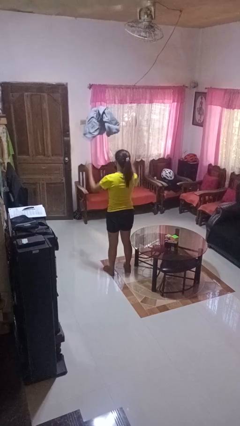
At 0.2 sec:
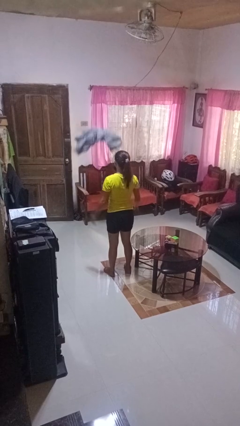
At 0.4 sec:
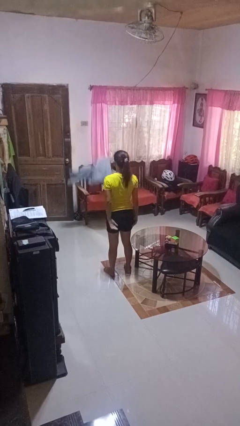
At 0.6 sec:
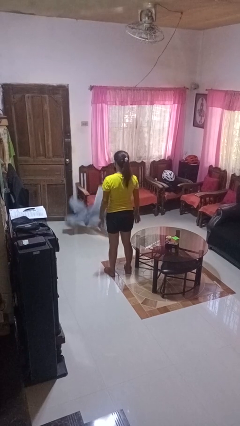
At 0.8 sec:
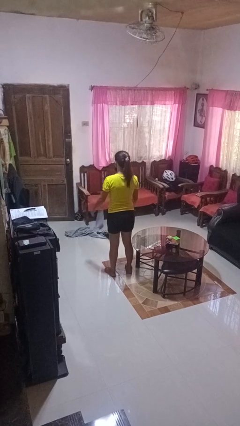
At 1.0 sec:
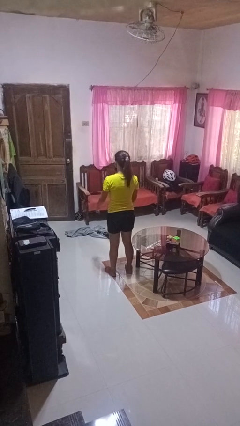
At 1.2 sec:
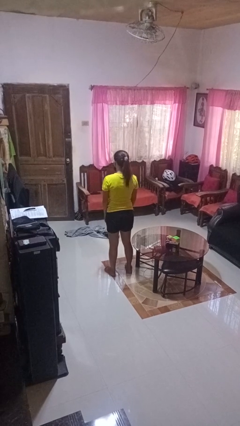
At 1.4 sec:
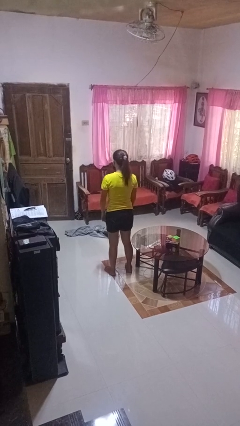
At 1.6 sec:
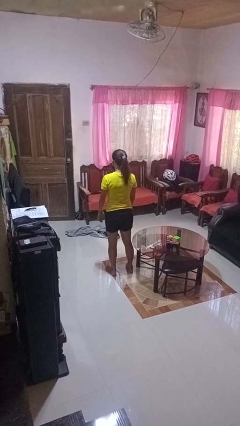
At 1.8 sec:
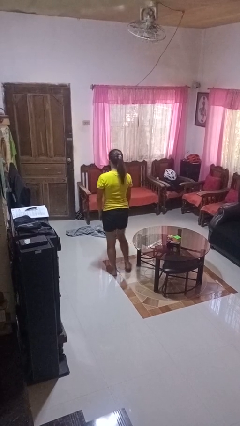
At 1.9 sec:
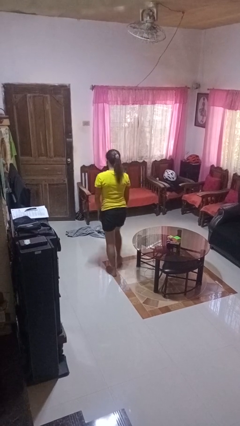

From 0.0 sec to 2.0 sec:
person throws object into air

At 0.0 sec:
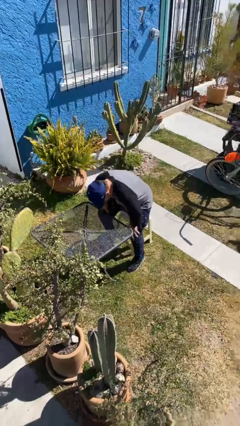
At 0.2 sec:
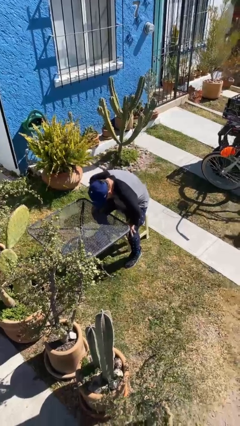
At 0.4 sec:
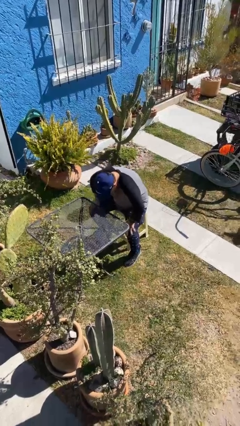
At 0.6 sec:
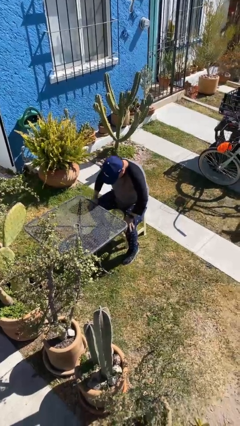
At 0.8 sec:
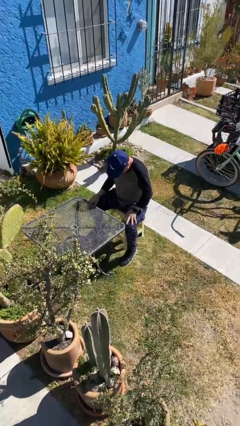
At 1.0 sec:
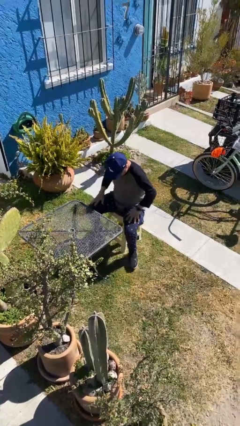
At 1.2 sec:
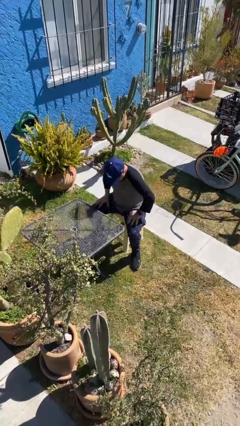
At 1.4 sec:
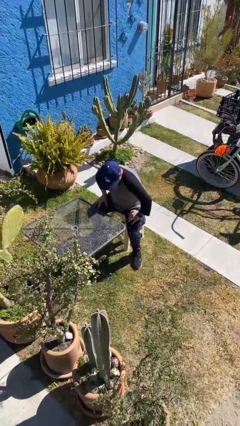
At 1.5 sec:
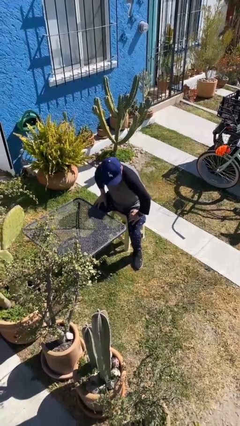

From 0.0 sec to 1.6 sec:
person sits down

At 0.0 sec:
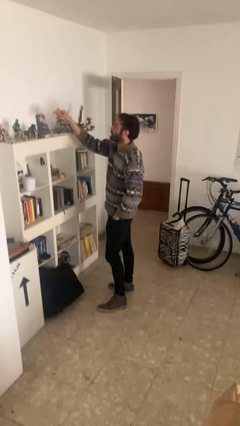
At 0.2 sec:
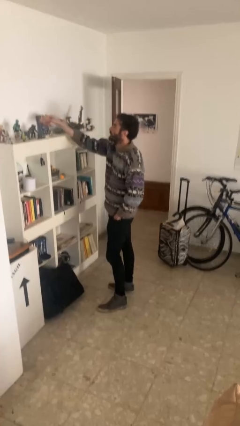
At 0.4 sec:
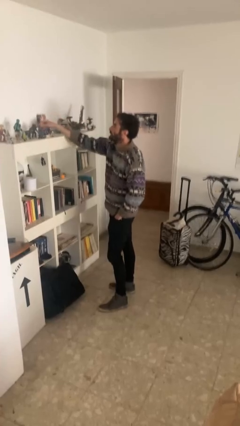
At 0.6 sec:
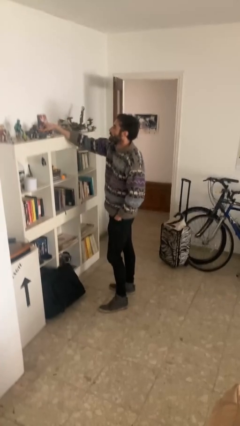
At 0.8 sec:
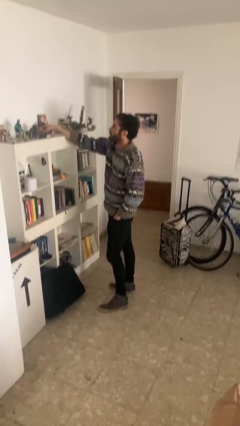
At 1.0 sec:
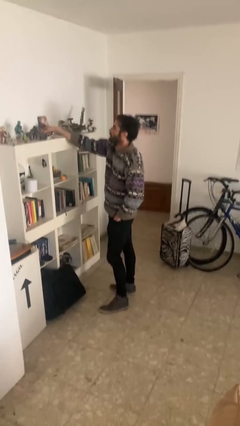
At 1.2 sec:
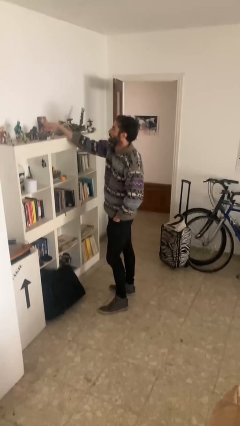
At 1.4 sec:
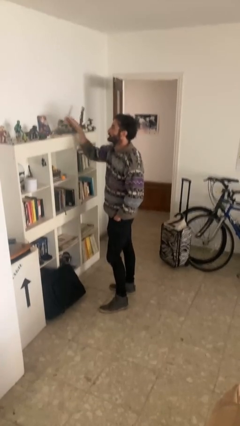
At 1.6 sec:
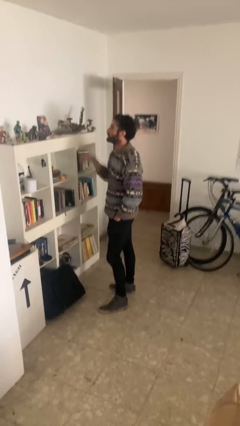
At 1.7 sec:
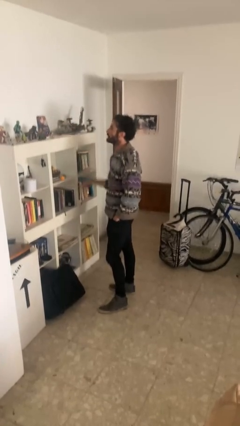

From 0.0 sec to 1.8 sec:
person puts down object on shelf

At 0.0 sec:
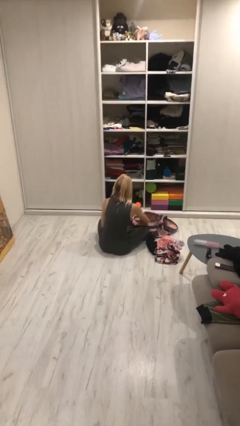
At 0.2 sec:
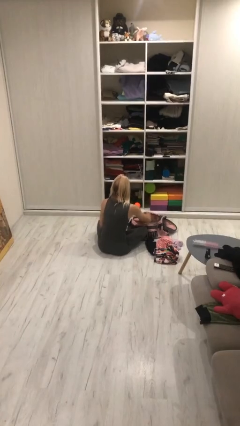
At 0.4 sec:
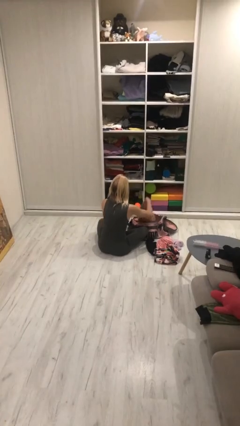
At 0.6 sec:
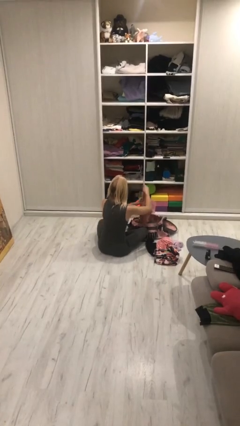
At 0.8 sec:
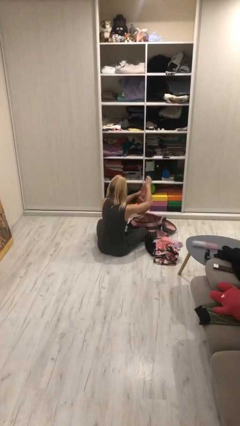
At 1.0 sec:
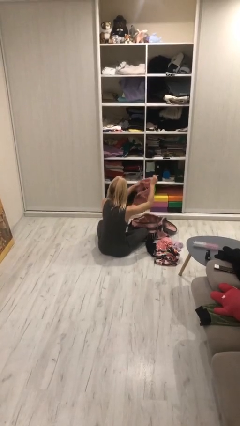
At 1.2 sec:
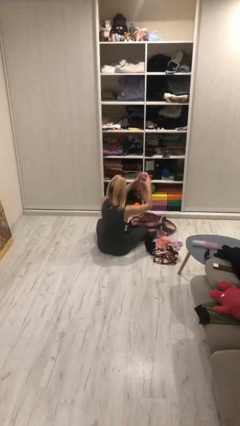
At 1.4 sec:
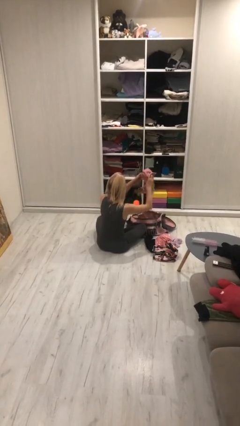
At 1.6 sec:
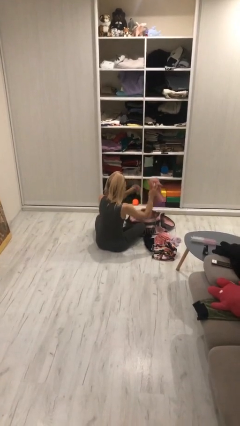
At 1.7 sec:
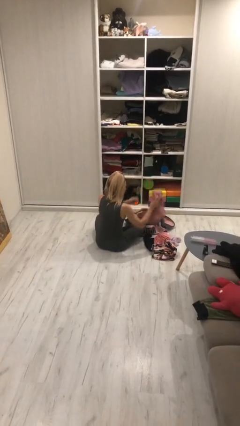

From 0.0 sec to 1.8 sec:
person unloads clothes from suitcase

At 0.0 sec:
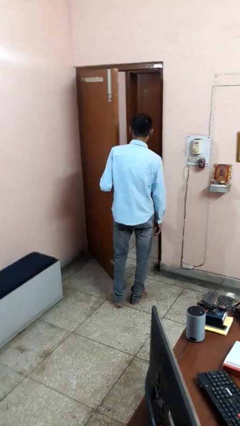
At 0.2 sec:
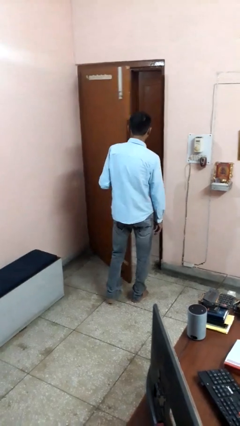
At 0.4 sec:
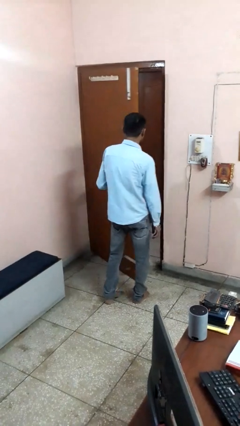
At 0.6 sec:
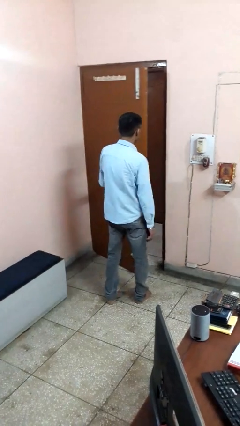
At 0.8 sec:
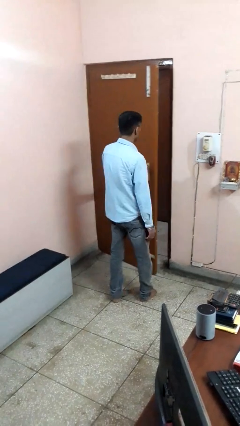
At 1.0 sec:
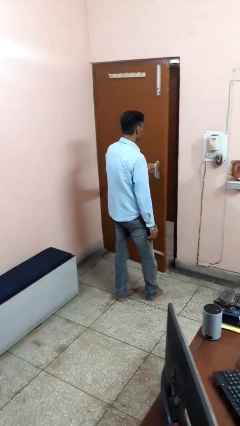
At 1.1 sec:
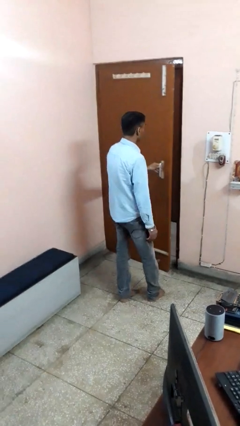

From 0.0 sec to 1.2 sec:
person closes facility door

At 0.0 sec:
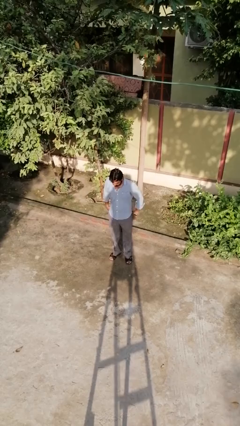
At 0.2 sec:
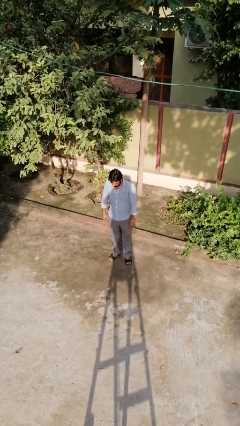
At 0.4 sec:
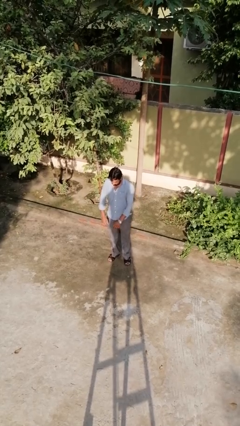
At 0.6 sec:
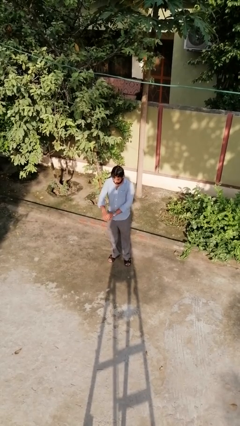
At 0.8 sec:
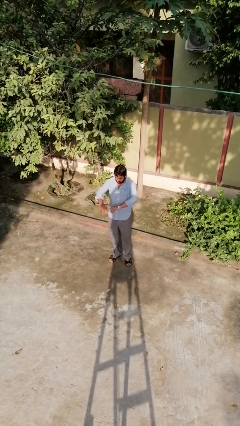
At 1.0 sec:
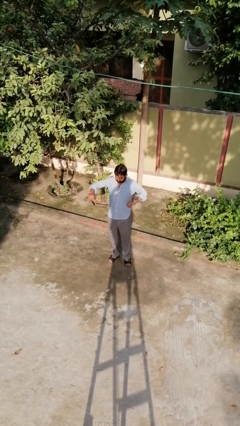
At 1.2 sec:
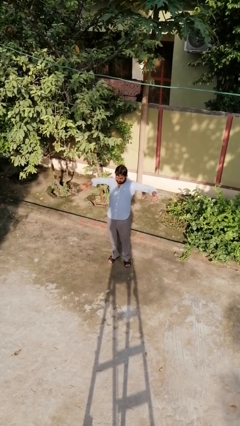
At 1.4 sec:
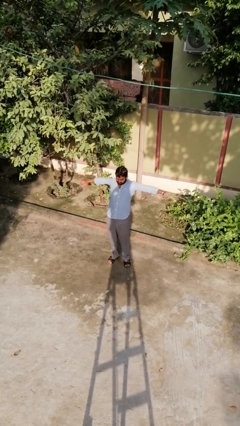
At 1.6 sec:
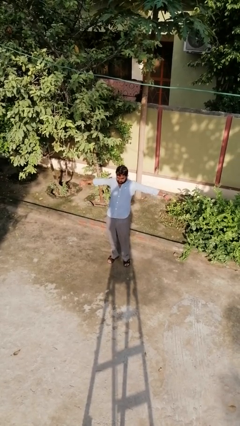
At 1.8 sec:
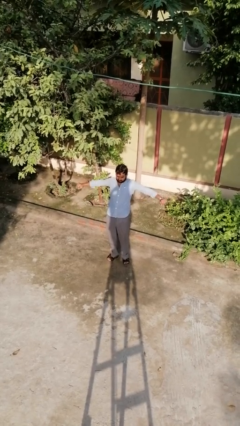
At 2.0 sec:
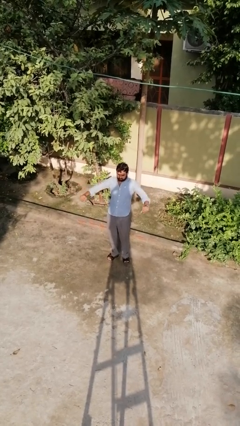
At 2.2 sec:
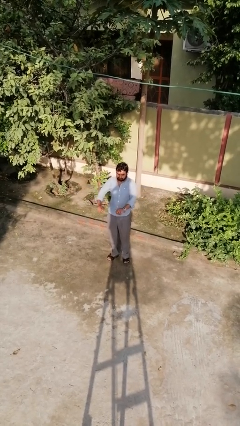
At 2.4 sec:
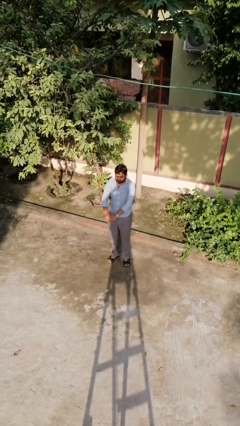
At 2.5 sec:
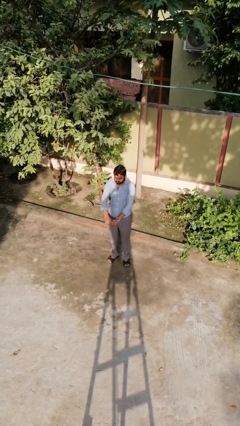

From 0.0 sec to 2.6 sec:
person stretches arms to side

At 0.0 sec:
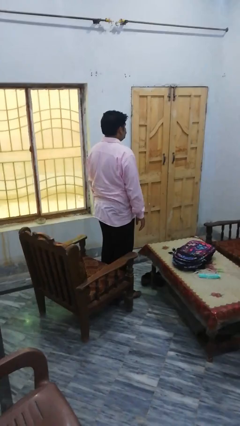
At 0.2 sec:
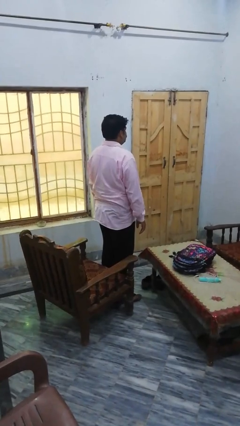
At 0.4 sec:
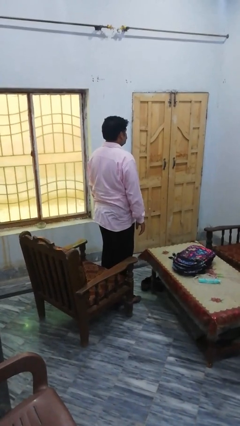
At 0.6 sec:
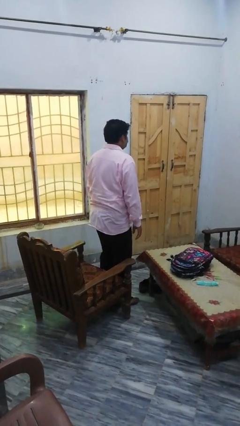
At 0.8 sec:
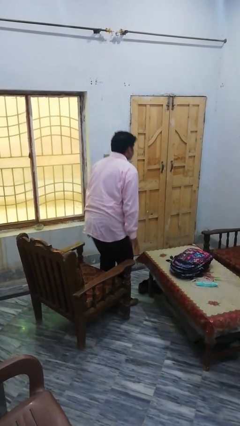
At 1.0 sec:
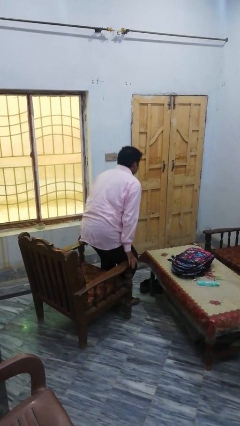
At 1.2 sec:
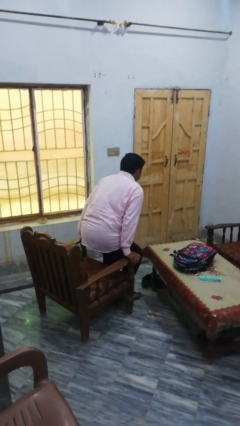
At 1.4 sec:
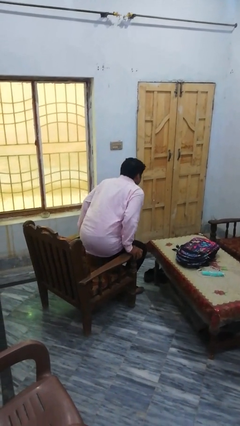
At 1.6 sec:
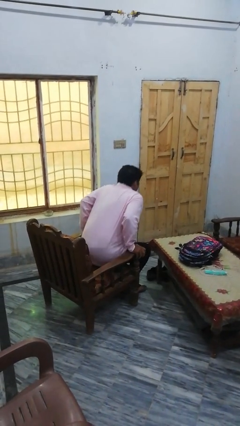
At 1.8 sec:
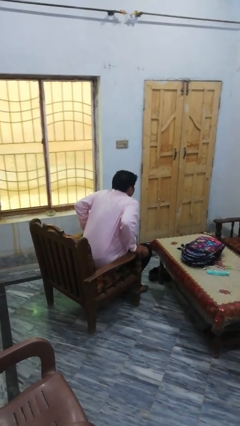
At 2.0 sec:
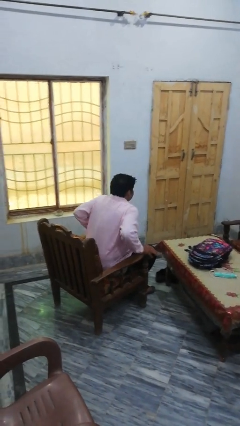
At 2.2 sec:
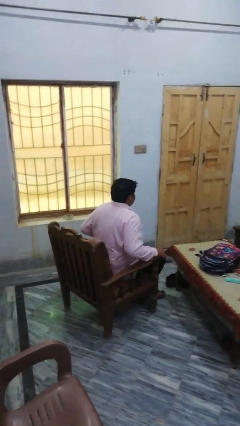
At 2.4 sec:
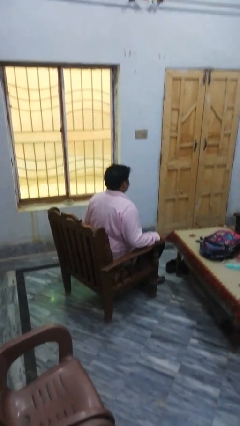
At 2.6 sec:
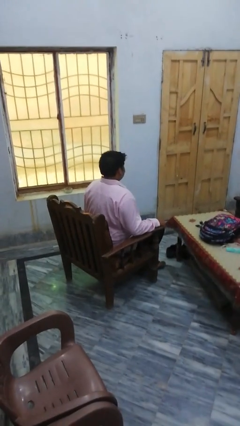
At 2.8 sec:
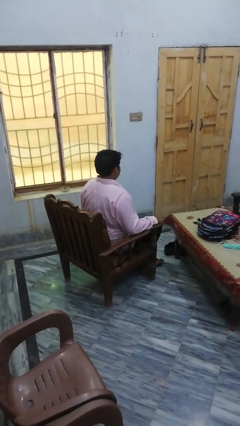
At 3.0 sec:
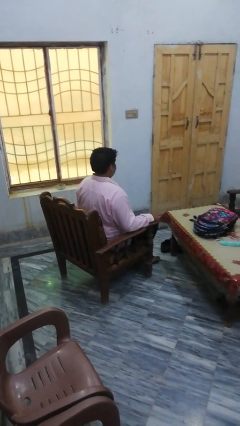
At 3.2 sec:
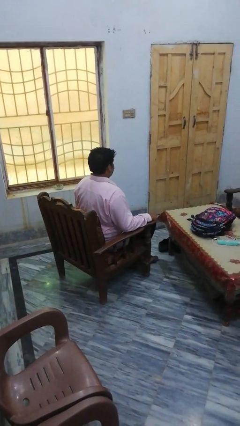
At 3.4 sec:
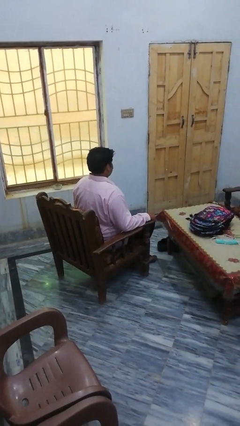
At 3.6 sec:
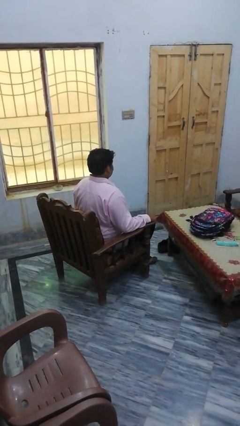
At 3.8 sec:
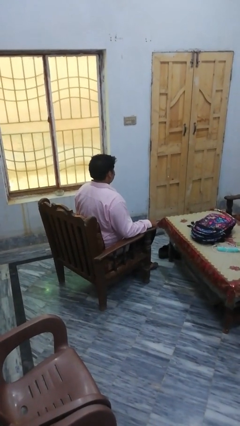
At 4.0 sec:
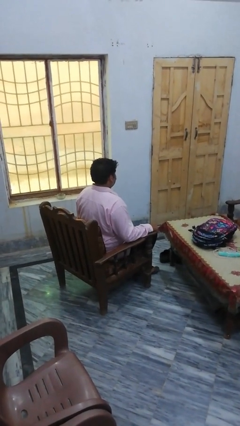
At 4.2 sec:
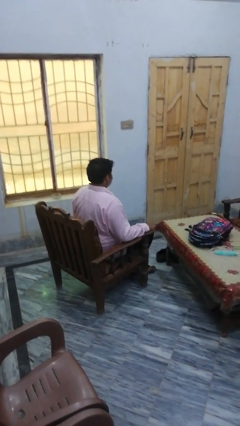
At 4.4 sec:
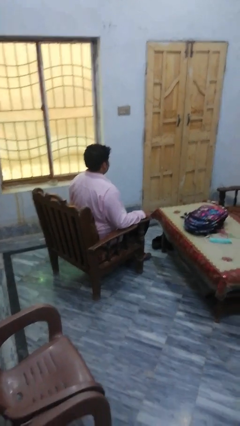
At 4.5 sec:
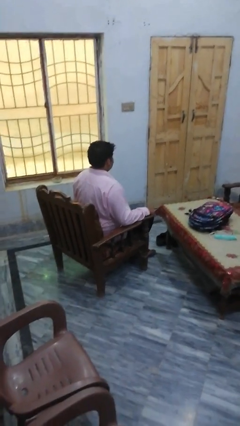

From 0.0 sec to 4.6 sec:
person lies down on couch

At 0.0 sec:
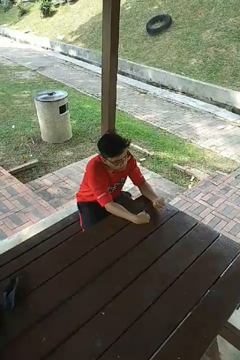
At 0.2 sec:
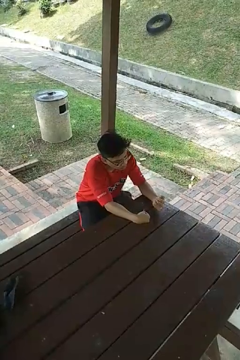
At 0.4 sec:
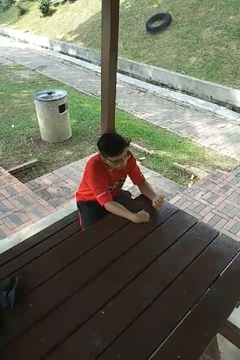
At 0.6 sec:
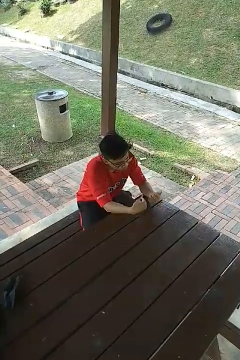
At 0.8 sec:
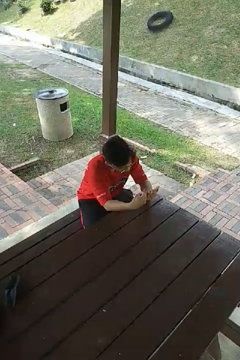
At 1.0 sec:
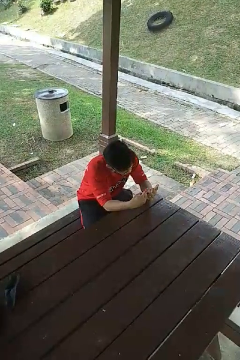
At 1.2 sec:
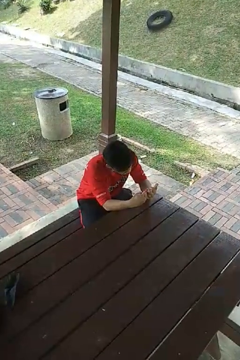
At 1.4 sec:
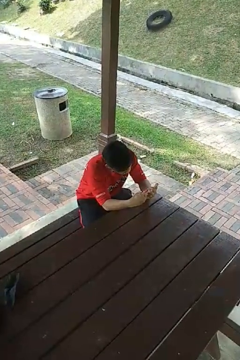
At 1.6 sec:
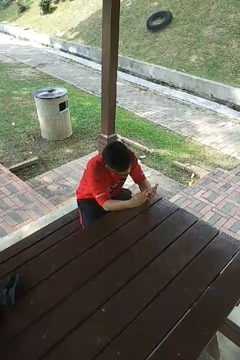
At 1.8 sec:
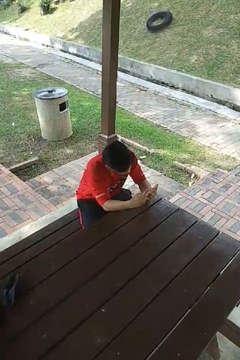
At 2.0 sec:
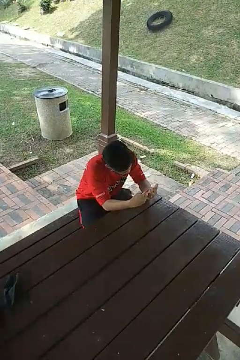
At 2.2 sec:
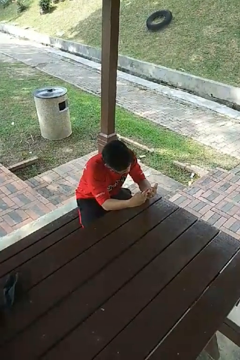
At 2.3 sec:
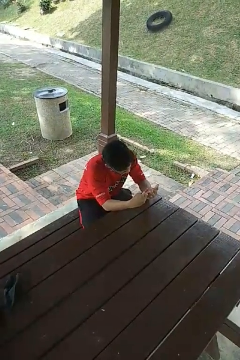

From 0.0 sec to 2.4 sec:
person paints fingernails
